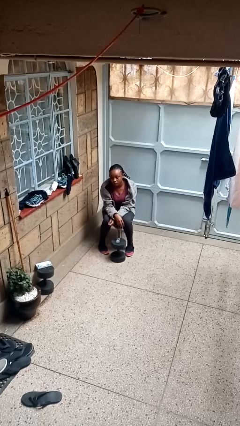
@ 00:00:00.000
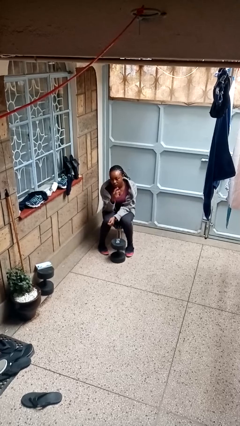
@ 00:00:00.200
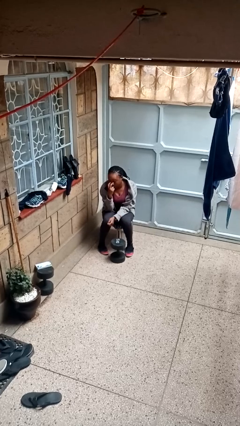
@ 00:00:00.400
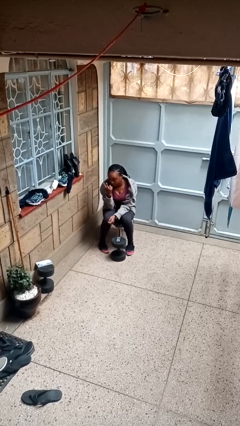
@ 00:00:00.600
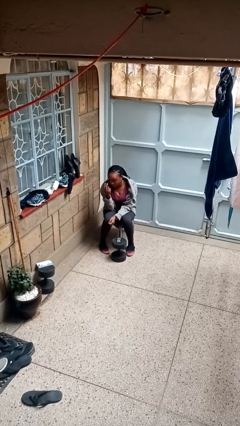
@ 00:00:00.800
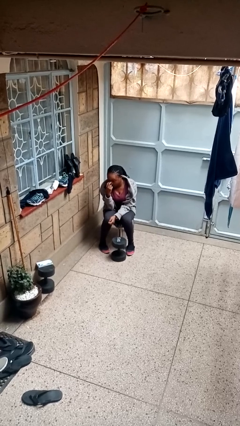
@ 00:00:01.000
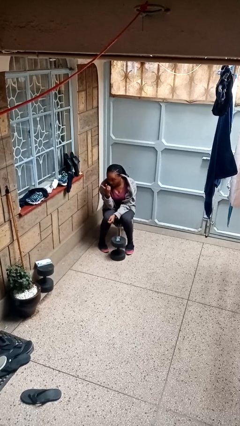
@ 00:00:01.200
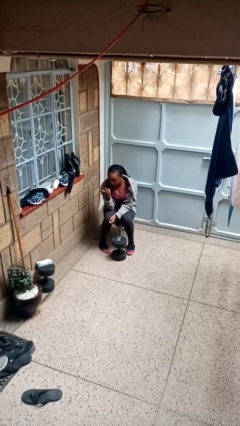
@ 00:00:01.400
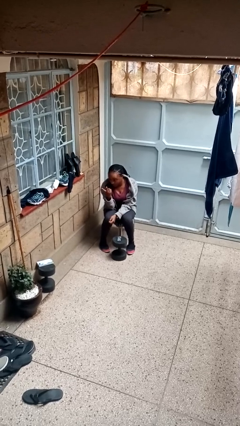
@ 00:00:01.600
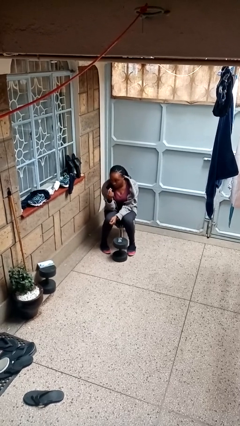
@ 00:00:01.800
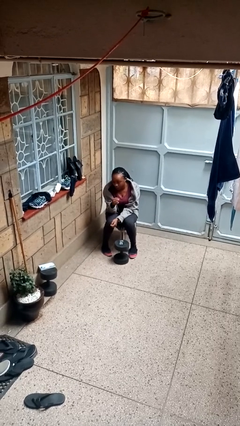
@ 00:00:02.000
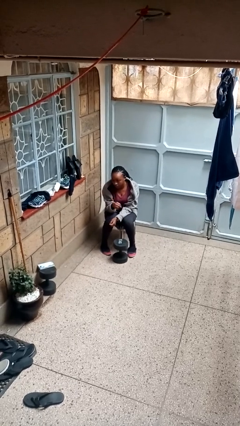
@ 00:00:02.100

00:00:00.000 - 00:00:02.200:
person gestures watch closely

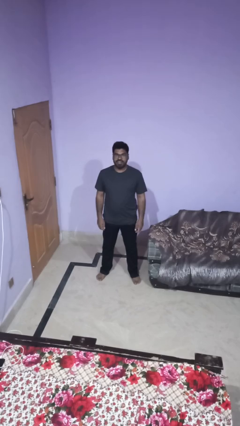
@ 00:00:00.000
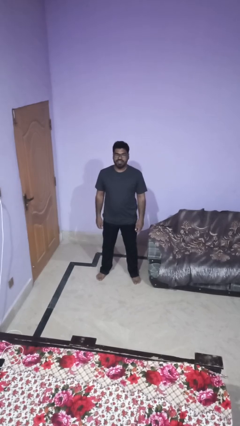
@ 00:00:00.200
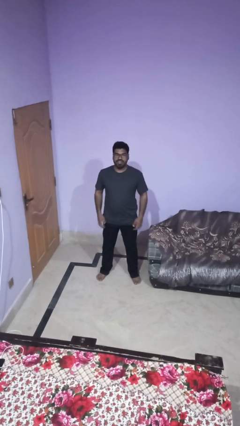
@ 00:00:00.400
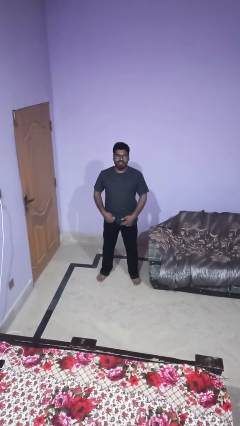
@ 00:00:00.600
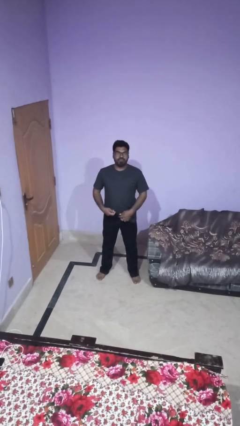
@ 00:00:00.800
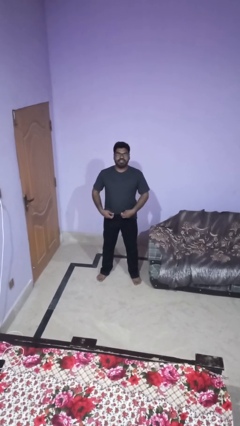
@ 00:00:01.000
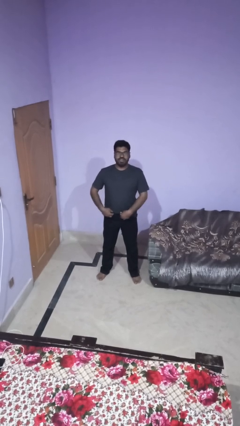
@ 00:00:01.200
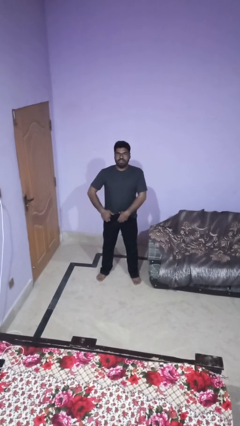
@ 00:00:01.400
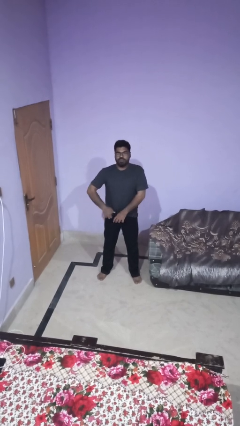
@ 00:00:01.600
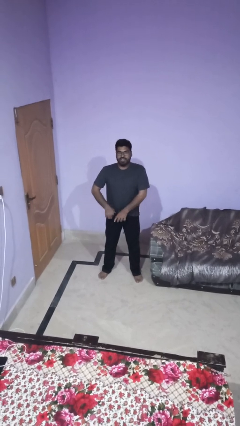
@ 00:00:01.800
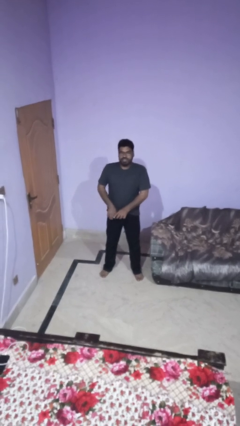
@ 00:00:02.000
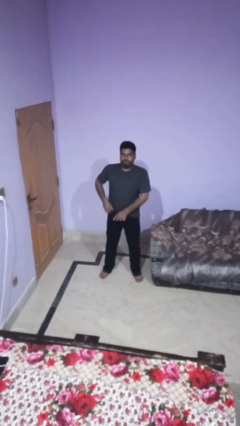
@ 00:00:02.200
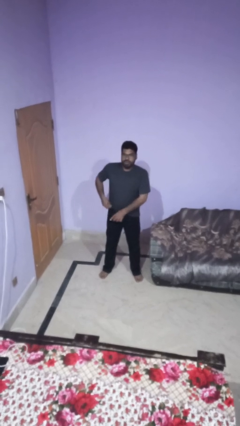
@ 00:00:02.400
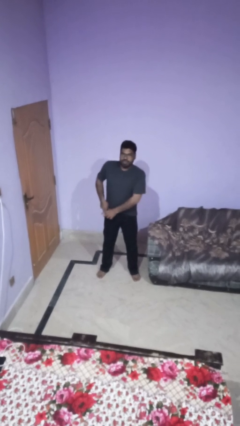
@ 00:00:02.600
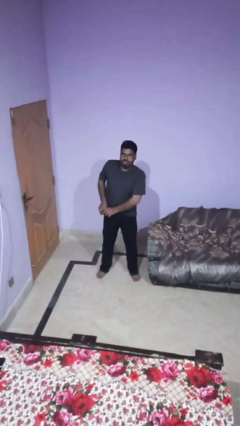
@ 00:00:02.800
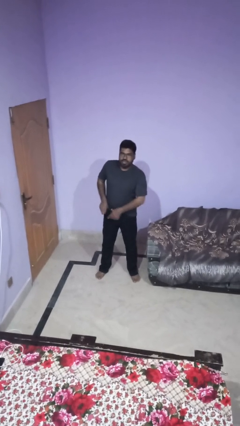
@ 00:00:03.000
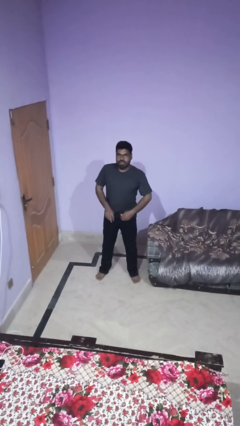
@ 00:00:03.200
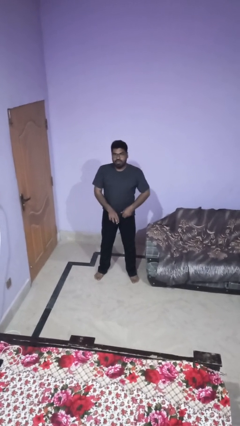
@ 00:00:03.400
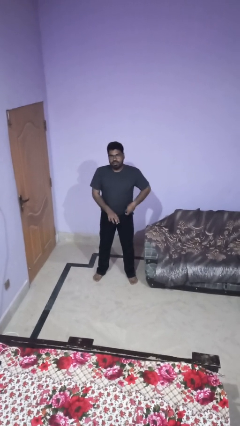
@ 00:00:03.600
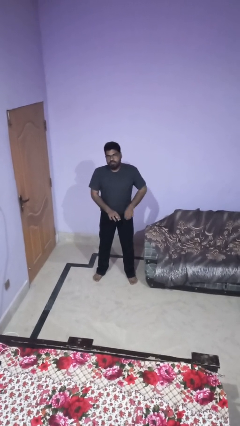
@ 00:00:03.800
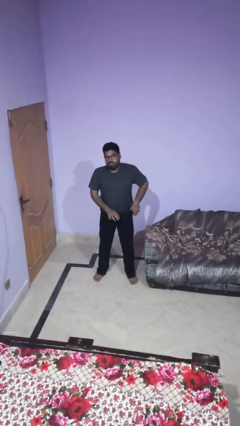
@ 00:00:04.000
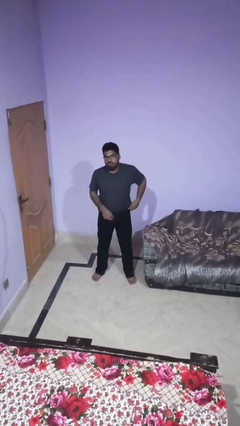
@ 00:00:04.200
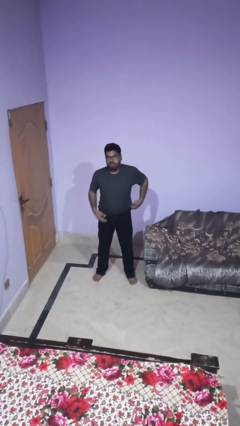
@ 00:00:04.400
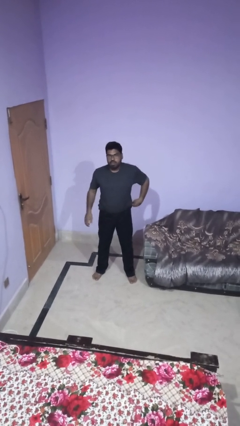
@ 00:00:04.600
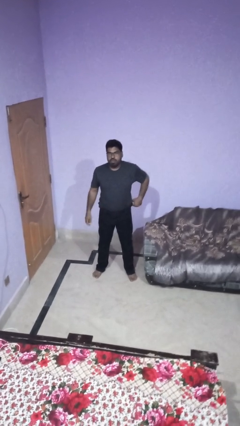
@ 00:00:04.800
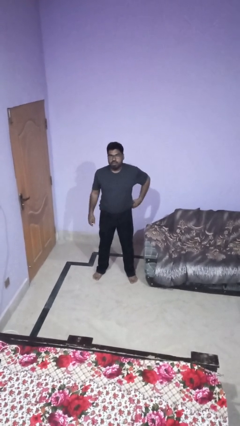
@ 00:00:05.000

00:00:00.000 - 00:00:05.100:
person tucks in shirt

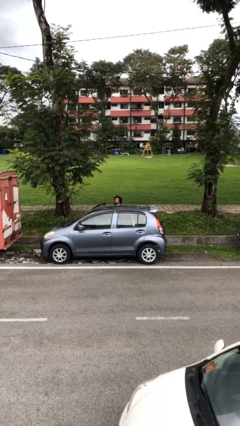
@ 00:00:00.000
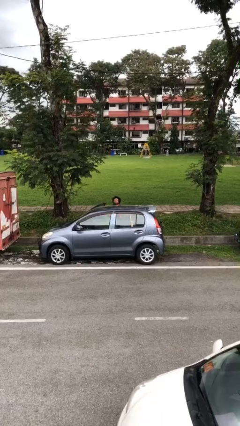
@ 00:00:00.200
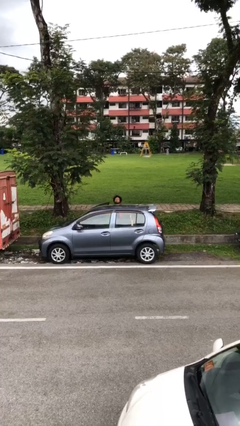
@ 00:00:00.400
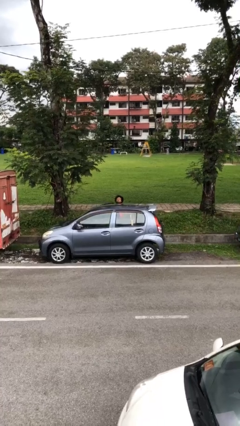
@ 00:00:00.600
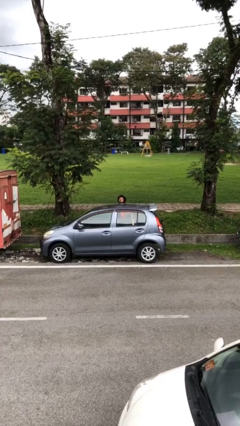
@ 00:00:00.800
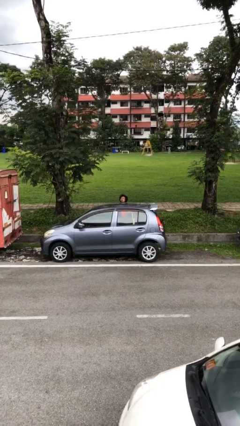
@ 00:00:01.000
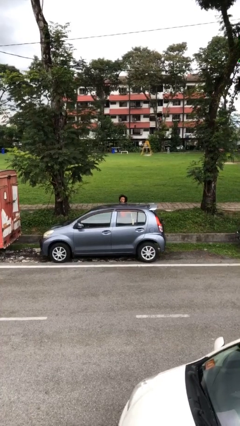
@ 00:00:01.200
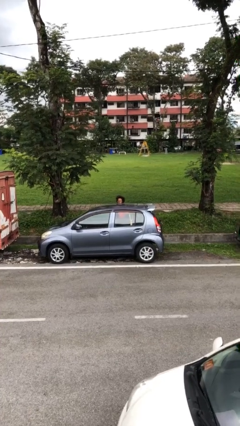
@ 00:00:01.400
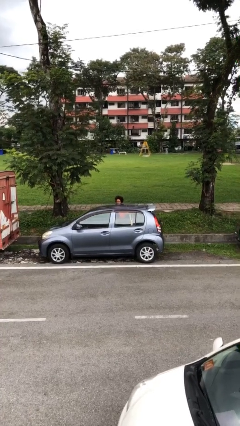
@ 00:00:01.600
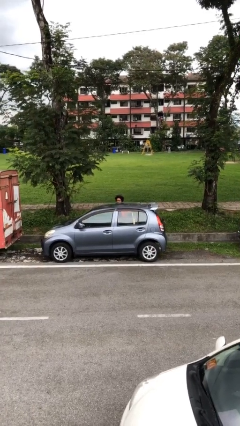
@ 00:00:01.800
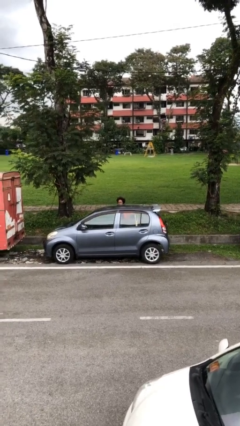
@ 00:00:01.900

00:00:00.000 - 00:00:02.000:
person closes car door

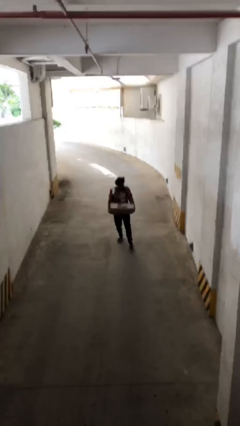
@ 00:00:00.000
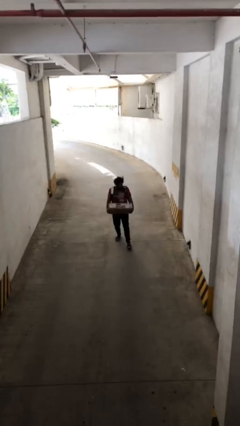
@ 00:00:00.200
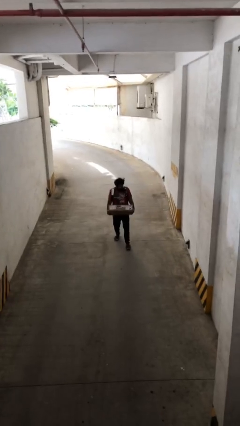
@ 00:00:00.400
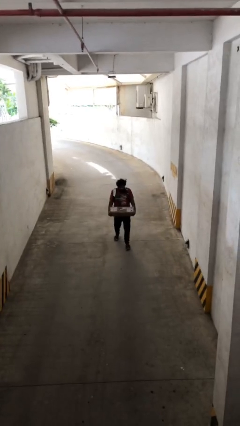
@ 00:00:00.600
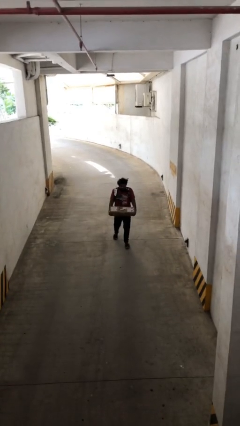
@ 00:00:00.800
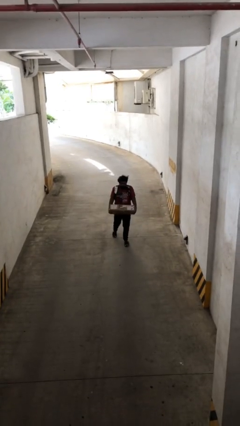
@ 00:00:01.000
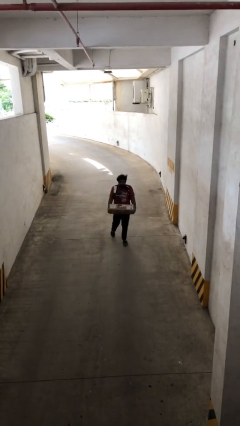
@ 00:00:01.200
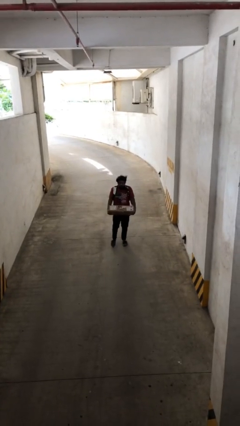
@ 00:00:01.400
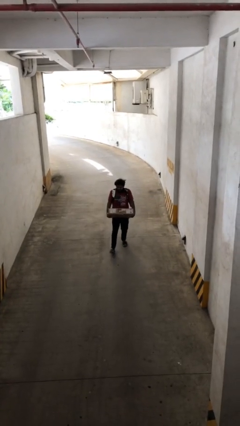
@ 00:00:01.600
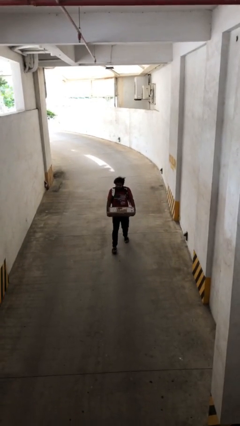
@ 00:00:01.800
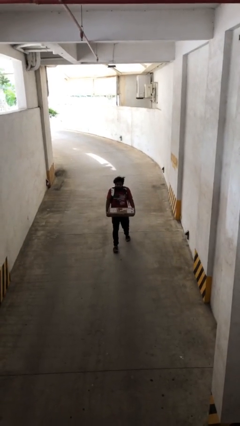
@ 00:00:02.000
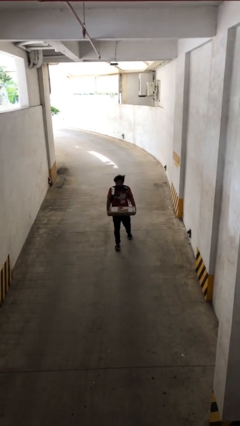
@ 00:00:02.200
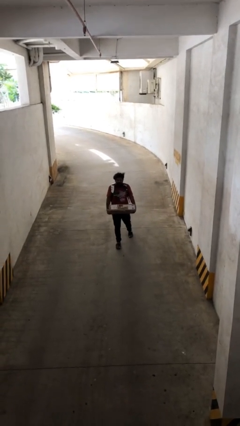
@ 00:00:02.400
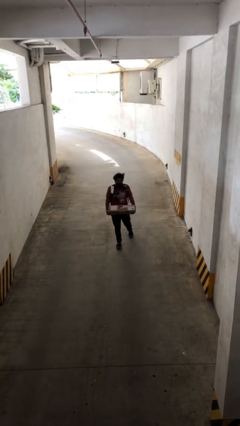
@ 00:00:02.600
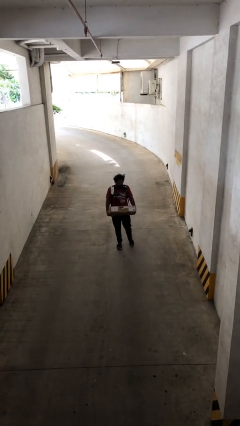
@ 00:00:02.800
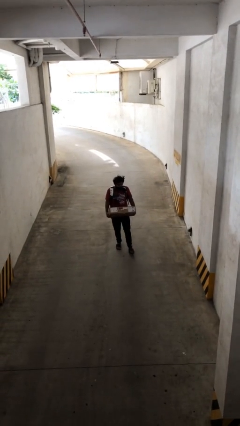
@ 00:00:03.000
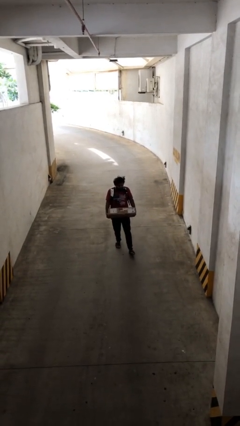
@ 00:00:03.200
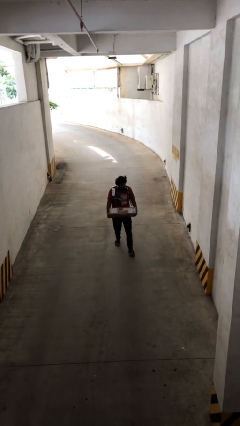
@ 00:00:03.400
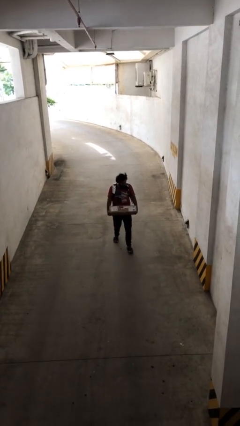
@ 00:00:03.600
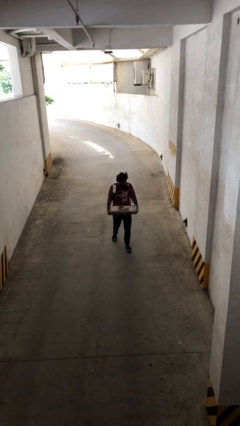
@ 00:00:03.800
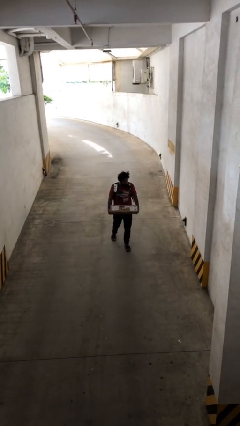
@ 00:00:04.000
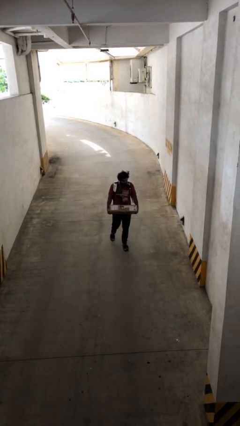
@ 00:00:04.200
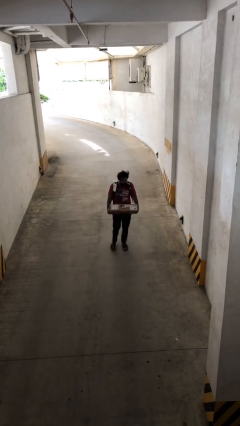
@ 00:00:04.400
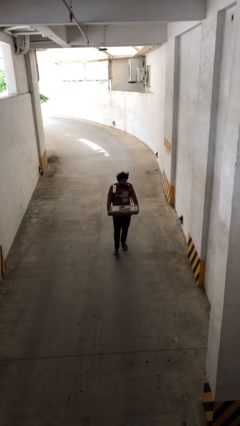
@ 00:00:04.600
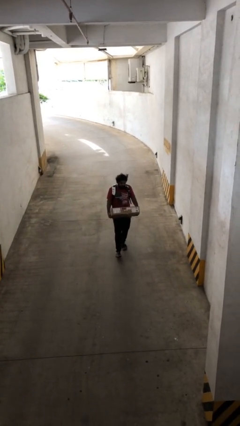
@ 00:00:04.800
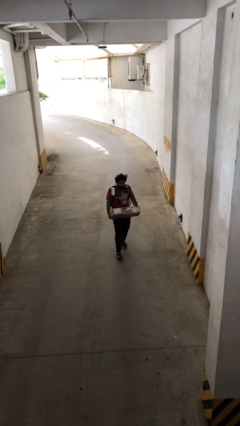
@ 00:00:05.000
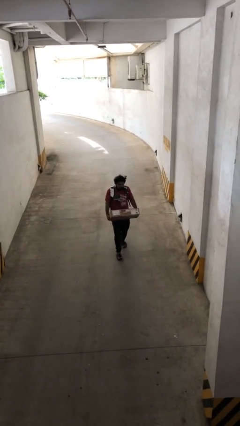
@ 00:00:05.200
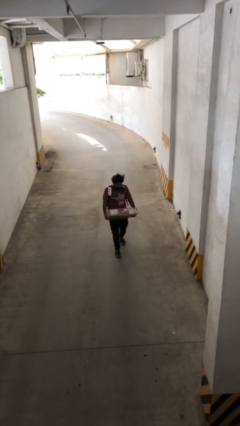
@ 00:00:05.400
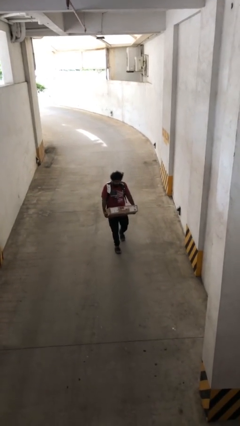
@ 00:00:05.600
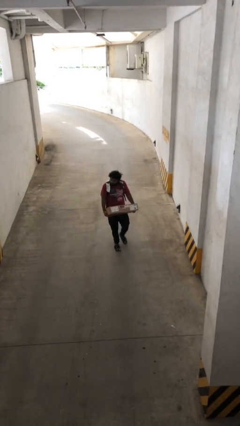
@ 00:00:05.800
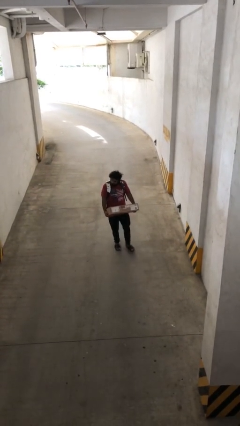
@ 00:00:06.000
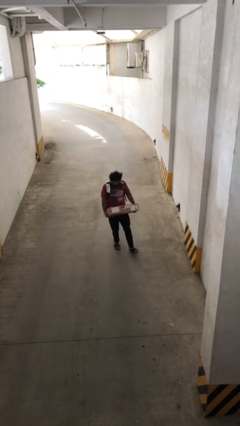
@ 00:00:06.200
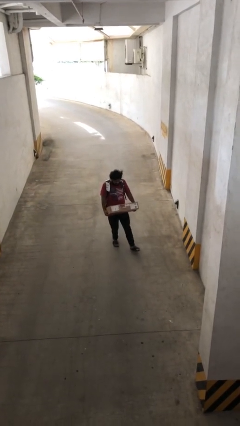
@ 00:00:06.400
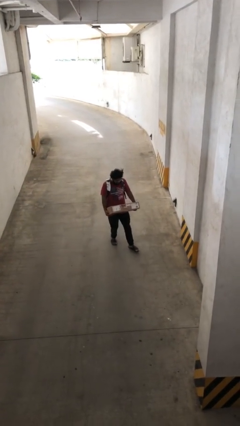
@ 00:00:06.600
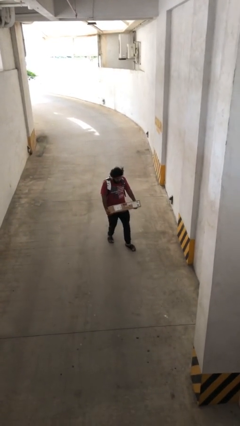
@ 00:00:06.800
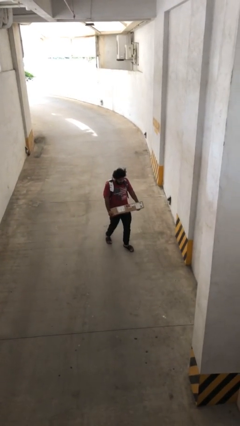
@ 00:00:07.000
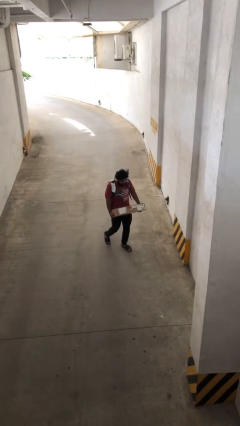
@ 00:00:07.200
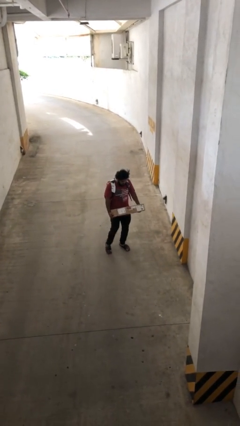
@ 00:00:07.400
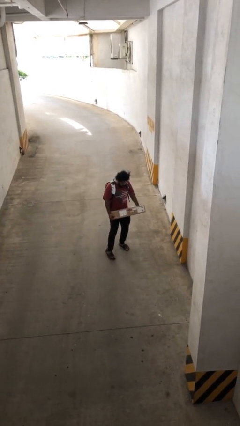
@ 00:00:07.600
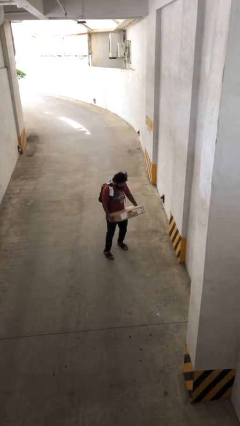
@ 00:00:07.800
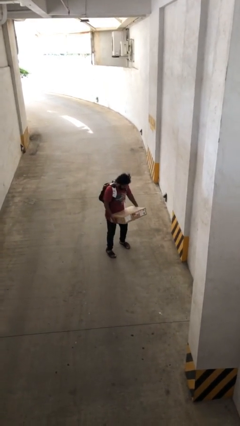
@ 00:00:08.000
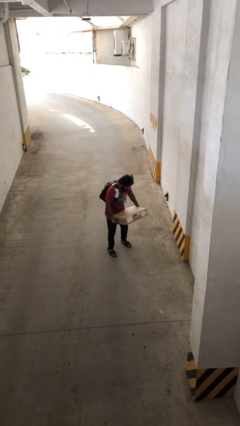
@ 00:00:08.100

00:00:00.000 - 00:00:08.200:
person carries heavy object
